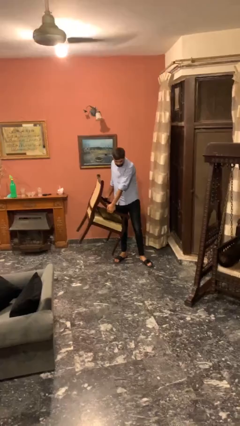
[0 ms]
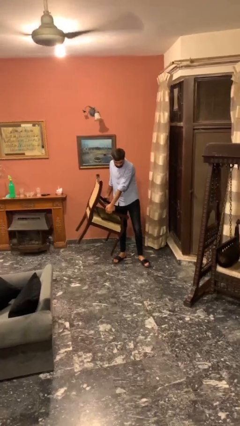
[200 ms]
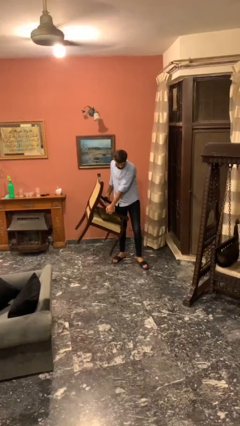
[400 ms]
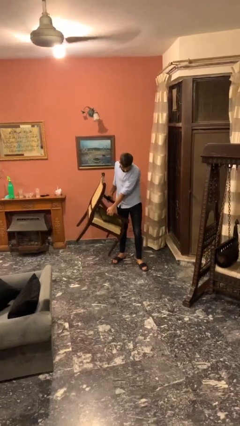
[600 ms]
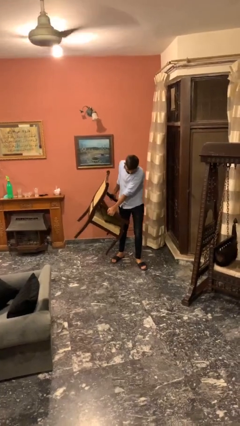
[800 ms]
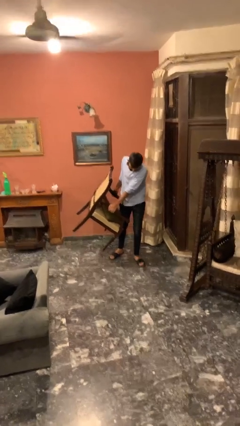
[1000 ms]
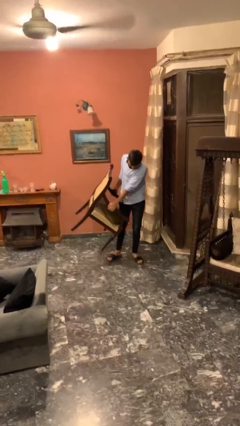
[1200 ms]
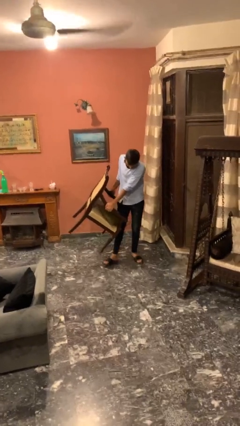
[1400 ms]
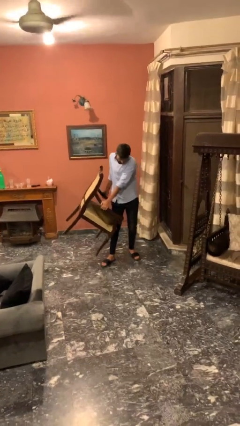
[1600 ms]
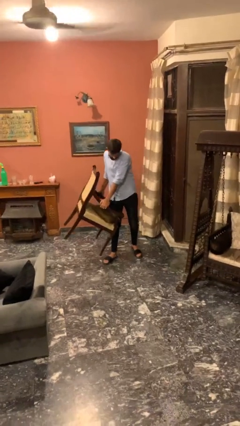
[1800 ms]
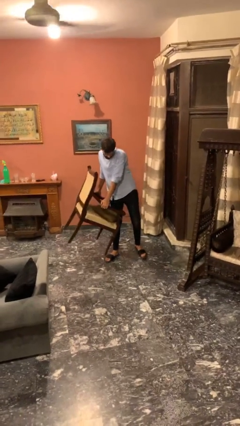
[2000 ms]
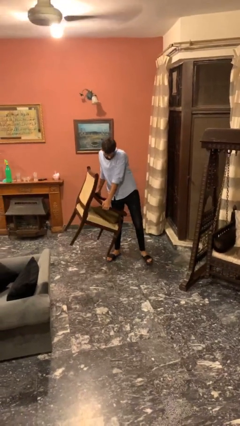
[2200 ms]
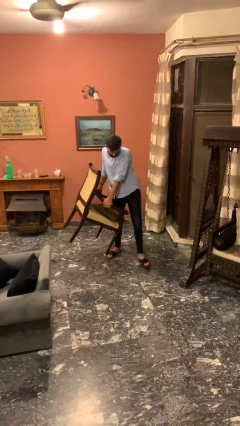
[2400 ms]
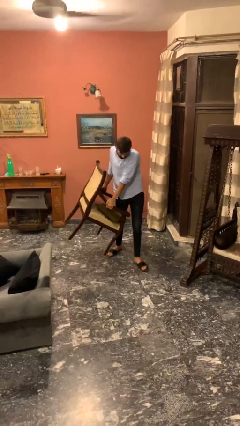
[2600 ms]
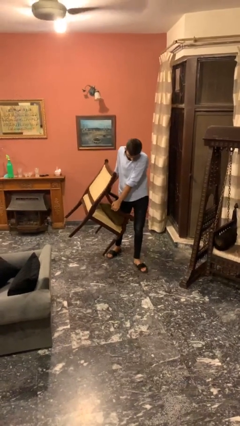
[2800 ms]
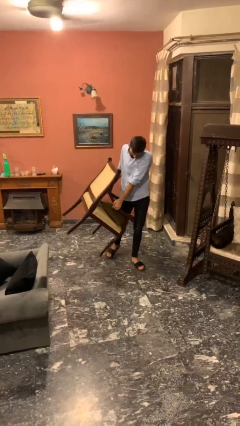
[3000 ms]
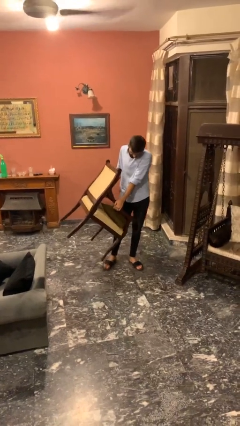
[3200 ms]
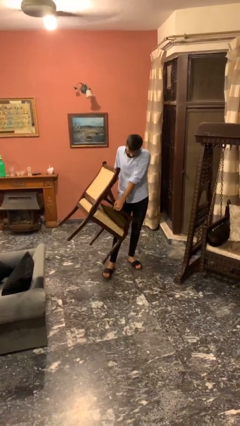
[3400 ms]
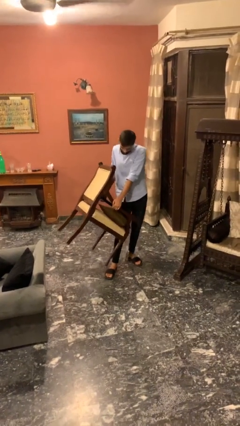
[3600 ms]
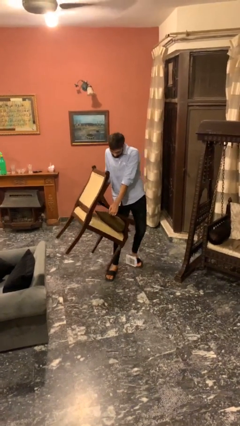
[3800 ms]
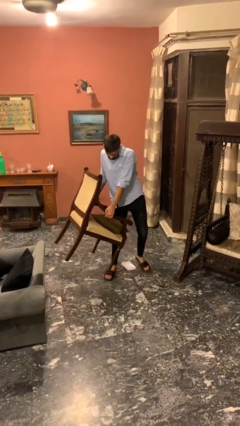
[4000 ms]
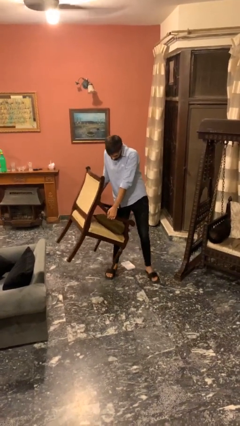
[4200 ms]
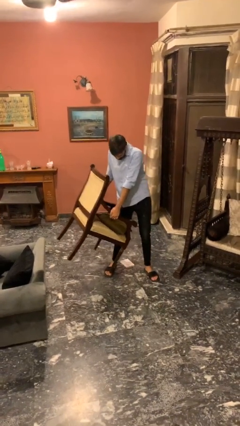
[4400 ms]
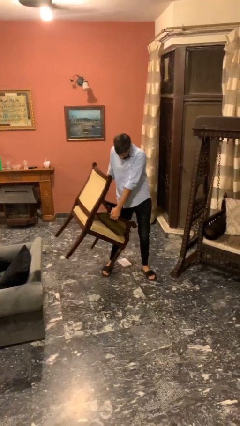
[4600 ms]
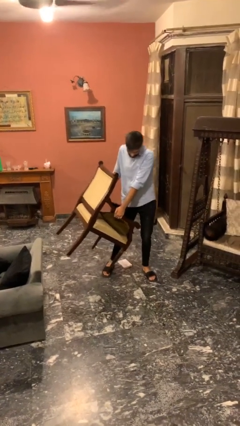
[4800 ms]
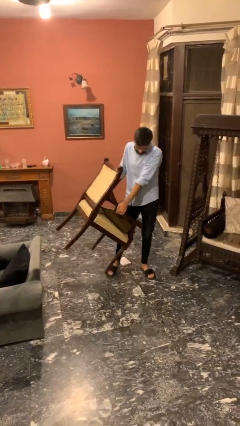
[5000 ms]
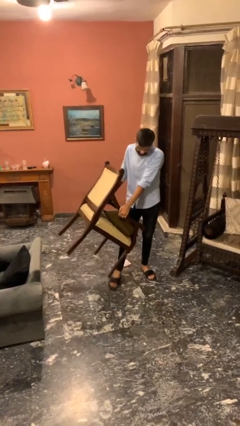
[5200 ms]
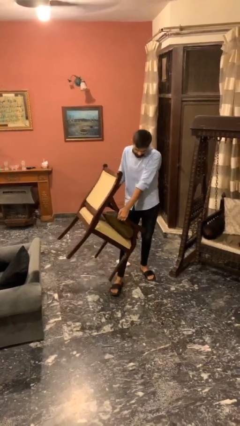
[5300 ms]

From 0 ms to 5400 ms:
person carries heavy object

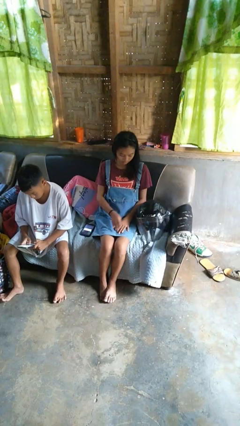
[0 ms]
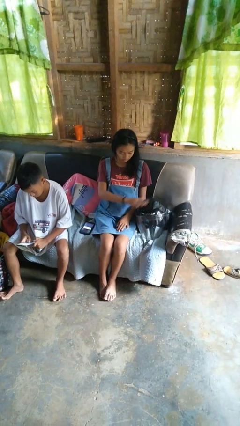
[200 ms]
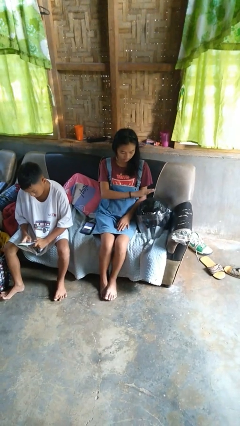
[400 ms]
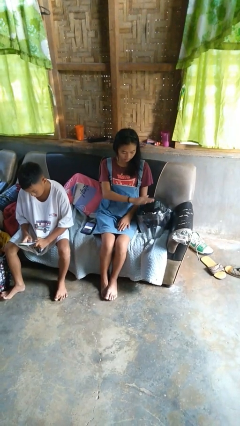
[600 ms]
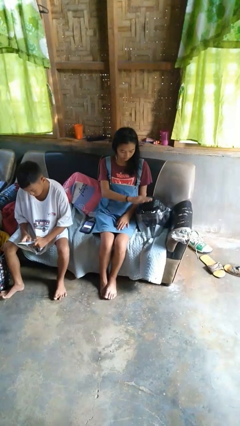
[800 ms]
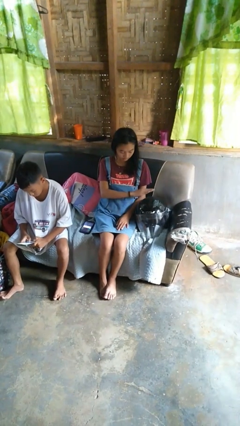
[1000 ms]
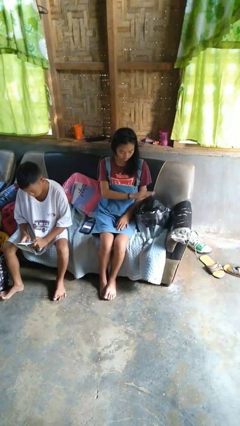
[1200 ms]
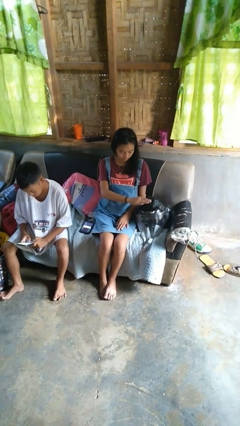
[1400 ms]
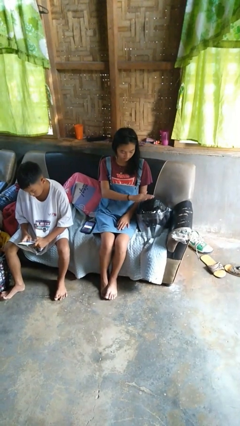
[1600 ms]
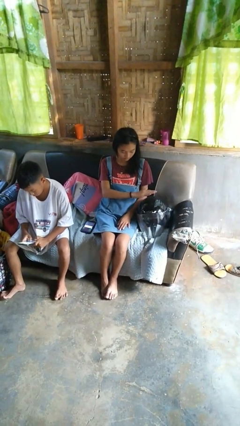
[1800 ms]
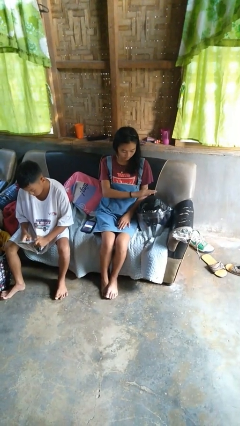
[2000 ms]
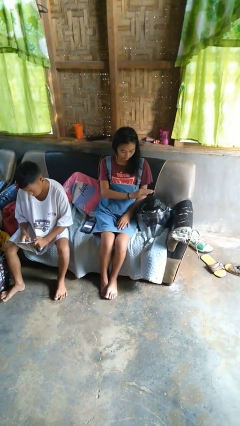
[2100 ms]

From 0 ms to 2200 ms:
person waves hand over object

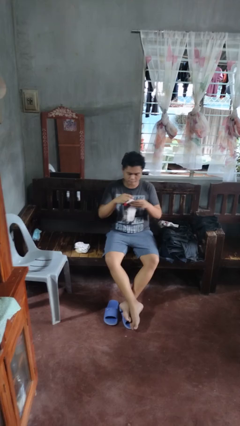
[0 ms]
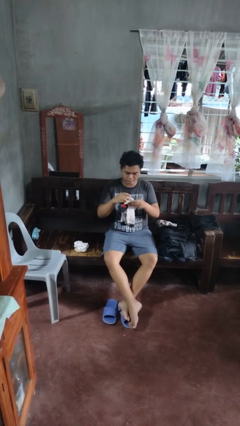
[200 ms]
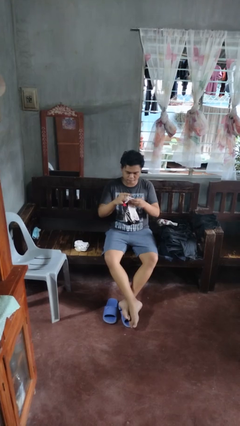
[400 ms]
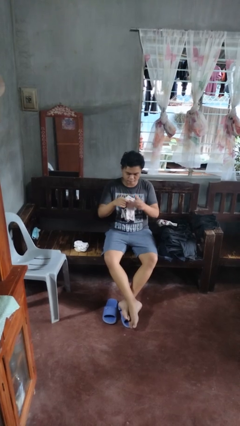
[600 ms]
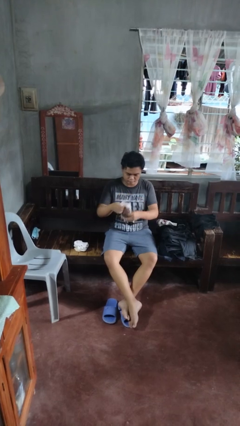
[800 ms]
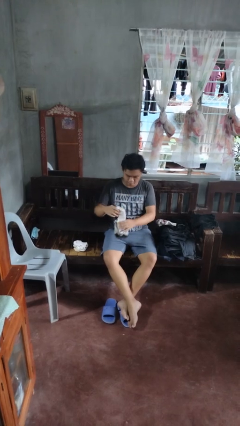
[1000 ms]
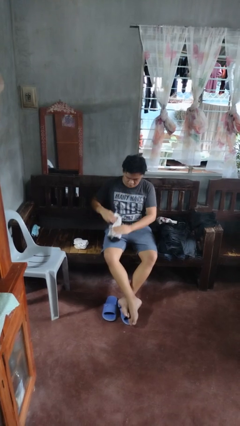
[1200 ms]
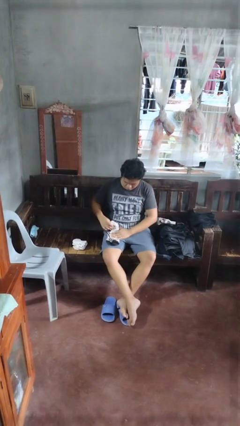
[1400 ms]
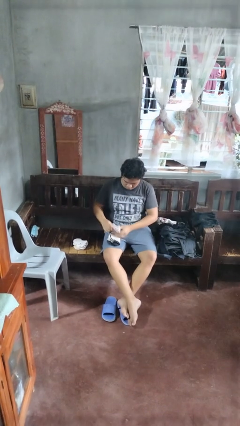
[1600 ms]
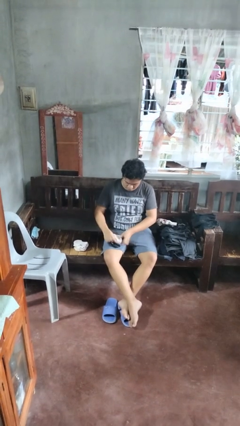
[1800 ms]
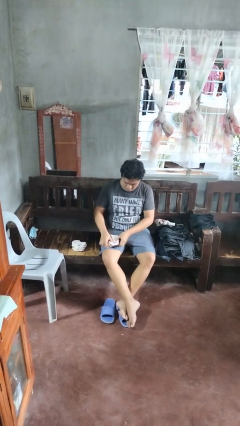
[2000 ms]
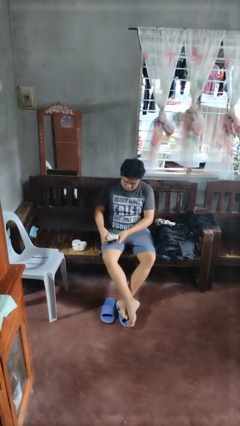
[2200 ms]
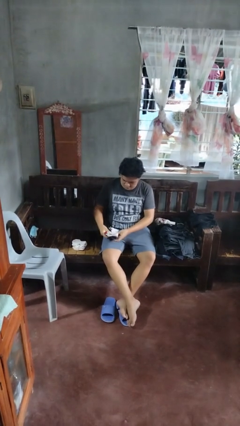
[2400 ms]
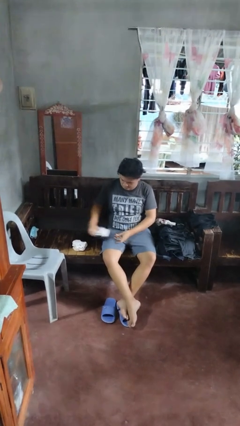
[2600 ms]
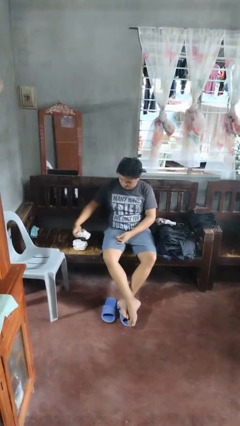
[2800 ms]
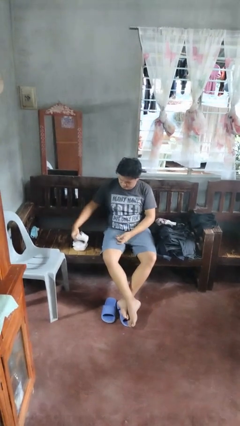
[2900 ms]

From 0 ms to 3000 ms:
person folds socks

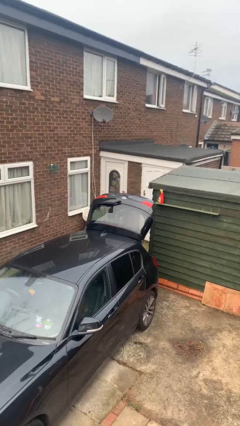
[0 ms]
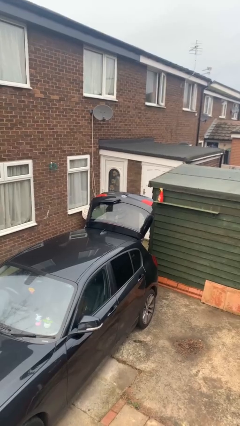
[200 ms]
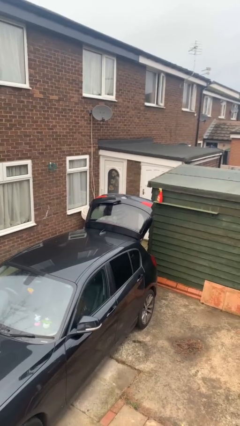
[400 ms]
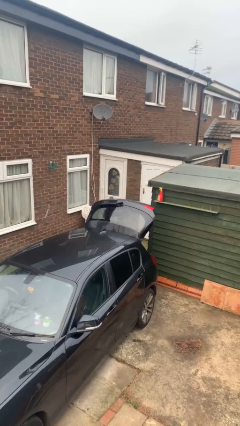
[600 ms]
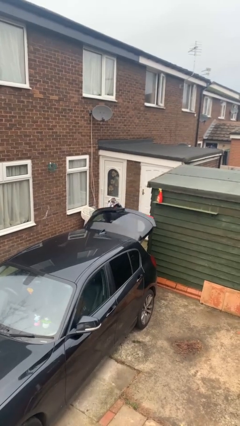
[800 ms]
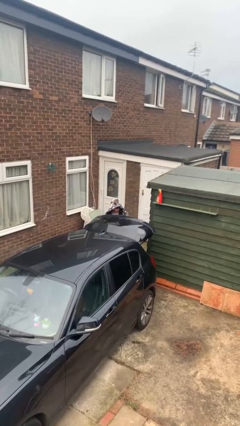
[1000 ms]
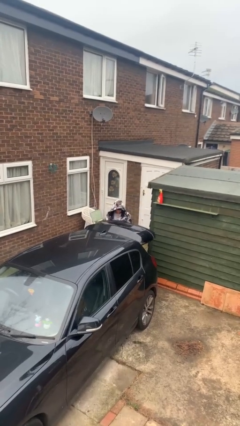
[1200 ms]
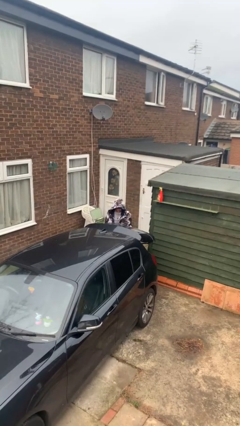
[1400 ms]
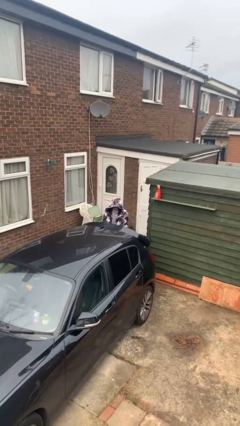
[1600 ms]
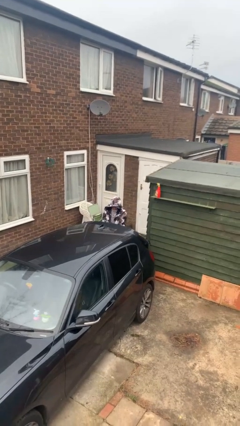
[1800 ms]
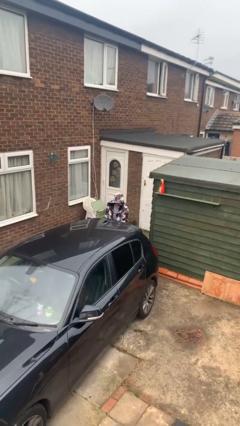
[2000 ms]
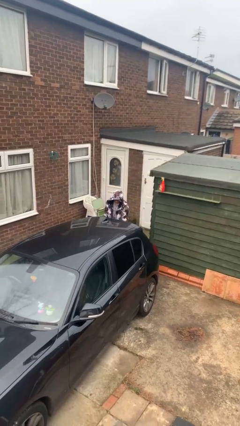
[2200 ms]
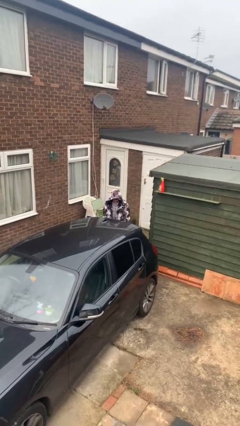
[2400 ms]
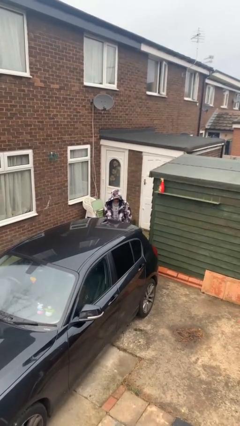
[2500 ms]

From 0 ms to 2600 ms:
person closes car trunk

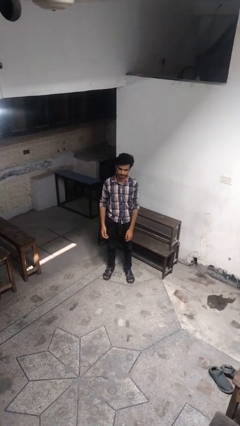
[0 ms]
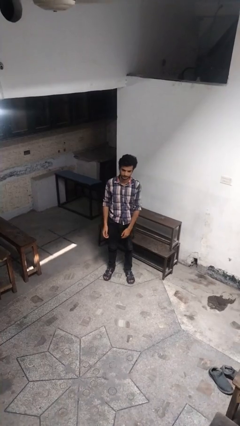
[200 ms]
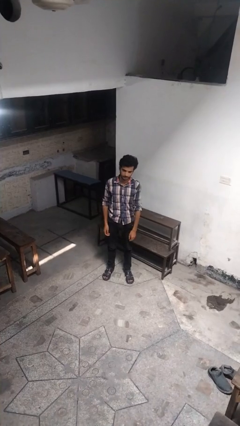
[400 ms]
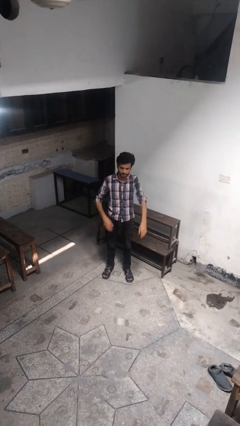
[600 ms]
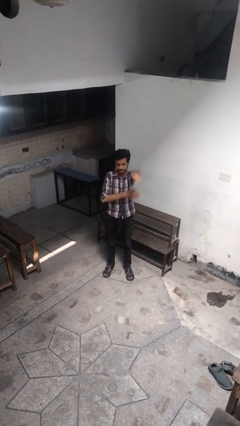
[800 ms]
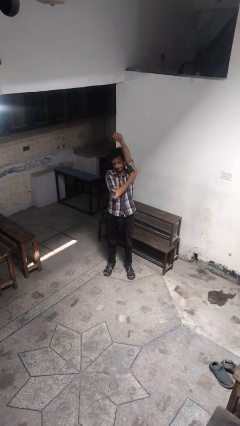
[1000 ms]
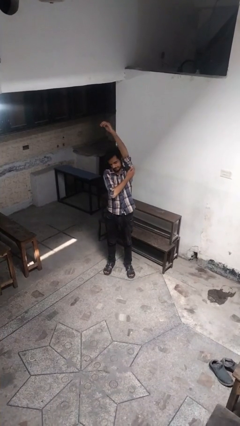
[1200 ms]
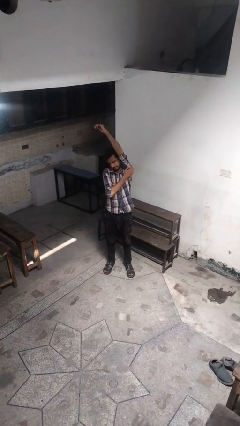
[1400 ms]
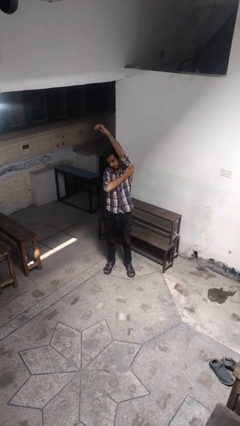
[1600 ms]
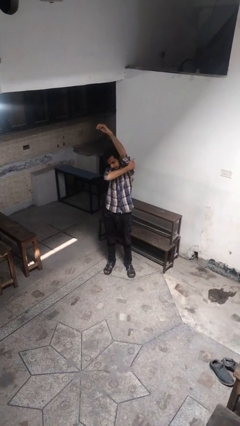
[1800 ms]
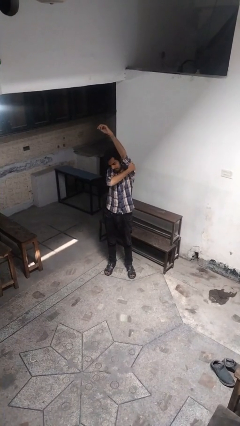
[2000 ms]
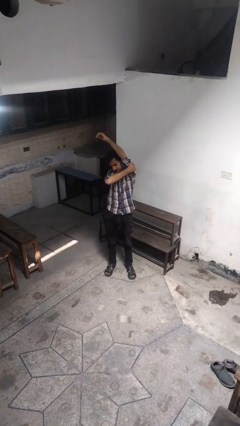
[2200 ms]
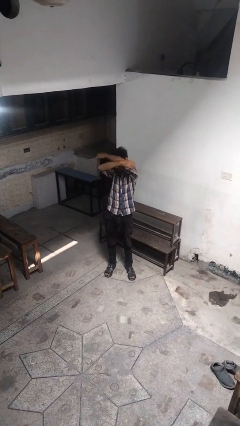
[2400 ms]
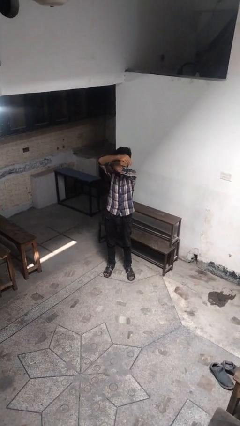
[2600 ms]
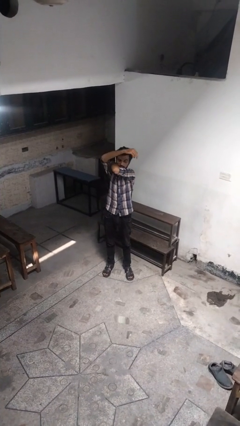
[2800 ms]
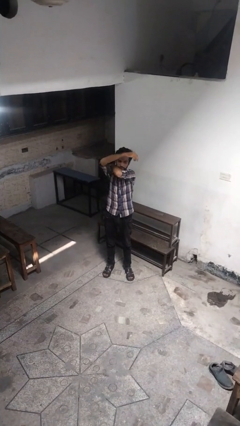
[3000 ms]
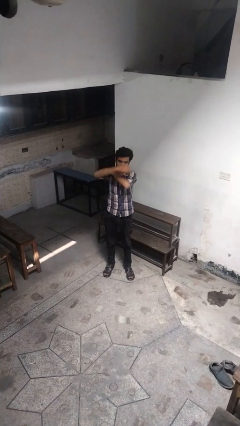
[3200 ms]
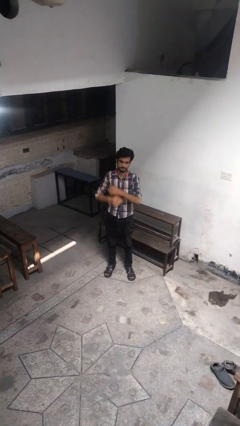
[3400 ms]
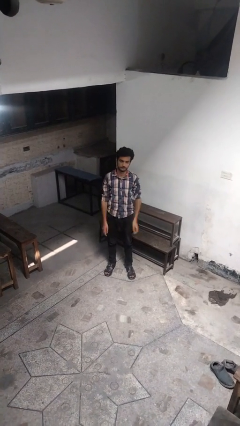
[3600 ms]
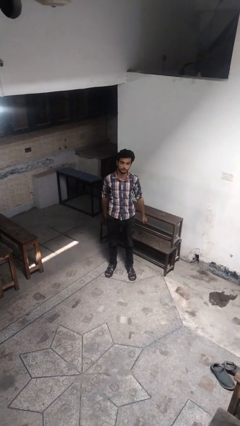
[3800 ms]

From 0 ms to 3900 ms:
person stretches arms over head

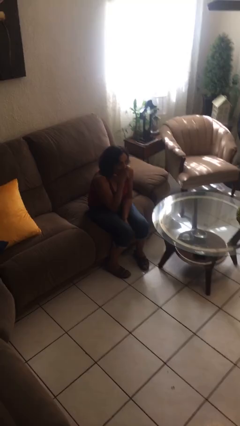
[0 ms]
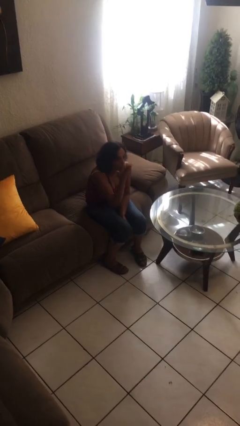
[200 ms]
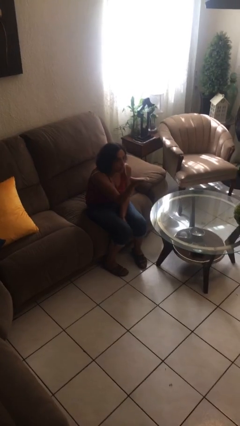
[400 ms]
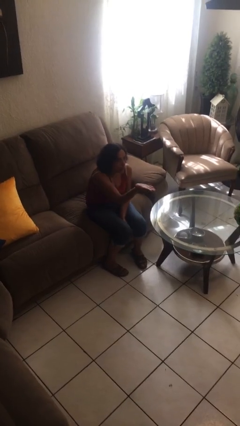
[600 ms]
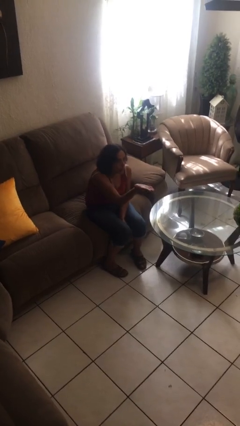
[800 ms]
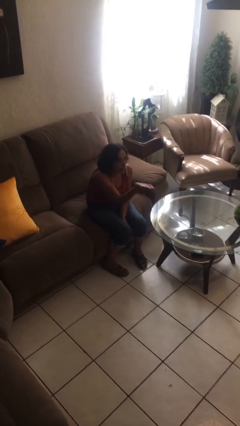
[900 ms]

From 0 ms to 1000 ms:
person gestures blow kiss
